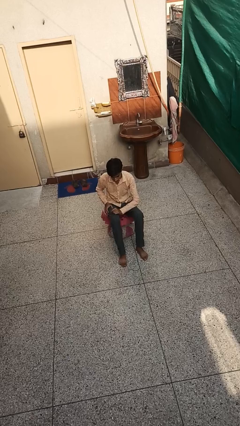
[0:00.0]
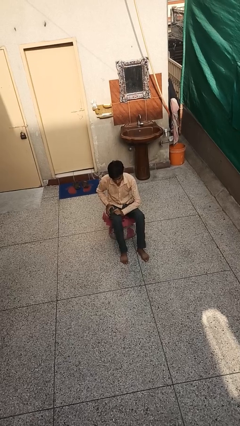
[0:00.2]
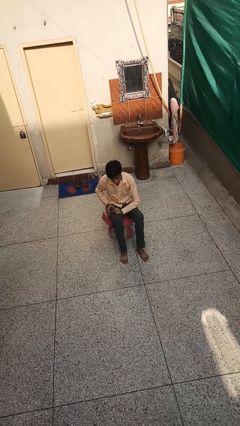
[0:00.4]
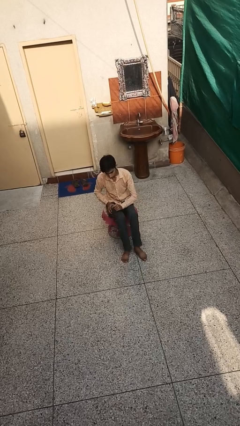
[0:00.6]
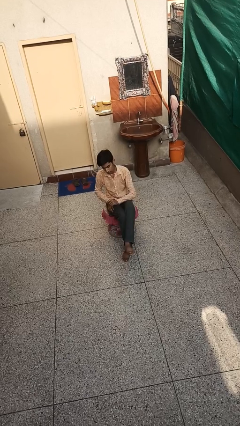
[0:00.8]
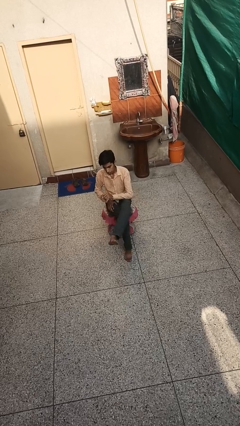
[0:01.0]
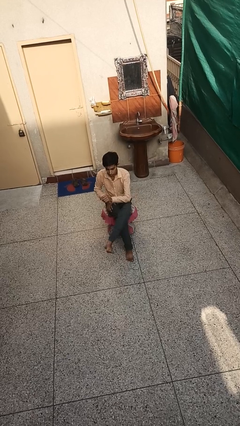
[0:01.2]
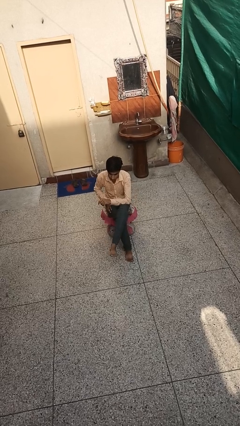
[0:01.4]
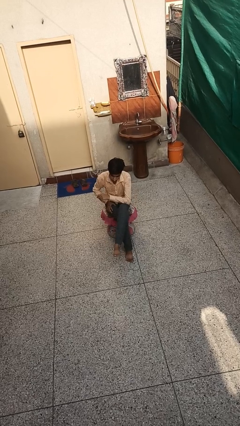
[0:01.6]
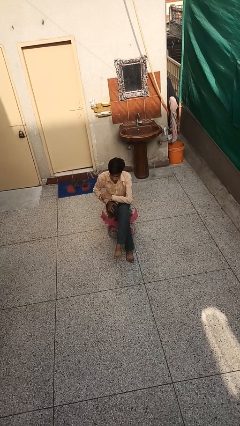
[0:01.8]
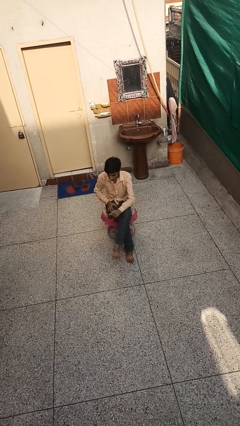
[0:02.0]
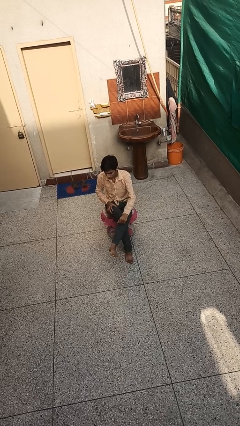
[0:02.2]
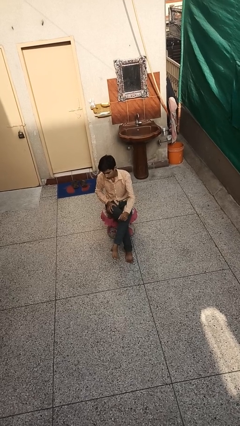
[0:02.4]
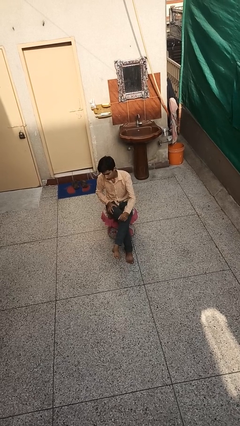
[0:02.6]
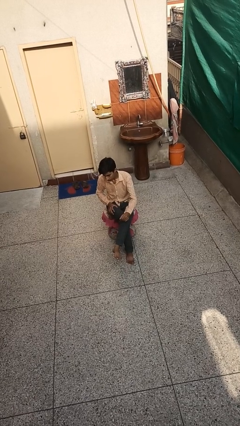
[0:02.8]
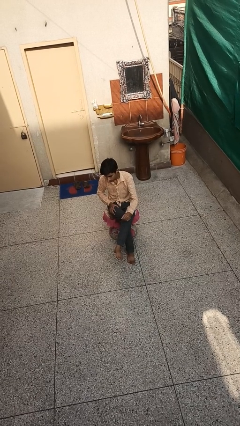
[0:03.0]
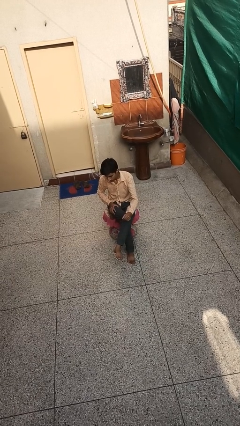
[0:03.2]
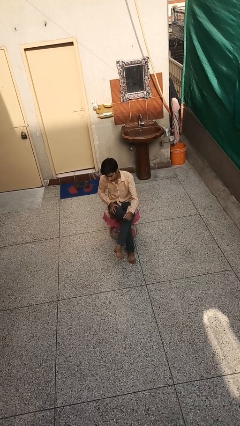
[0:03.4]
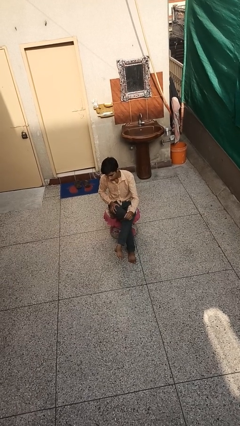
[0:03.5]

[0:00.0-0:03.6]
person crosses legs

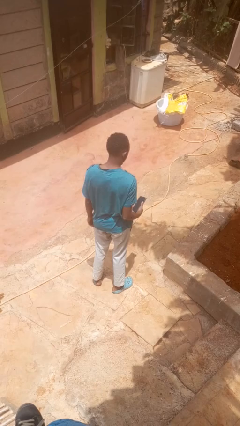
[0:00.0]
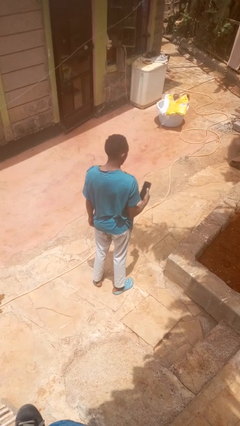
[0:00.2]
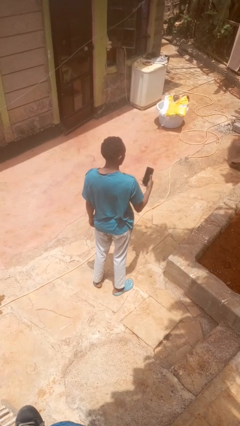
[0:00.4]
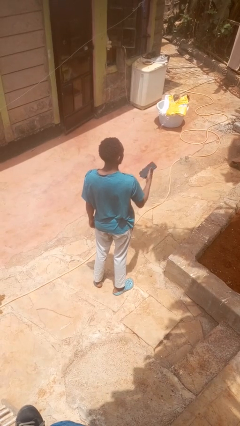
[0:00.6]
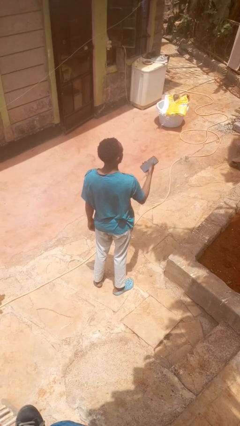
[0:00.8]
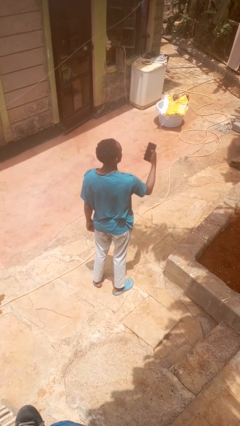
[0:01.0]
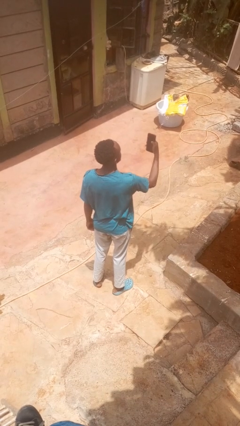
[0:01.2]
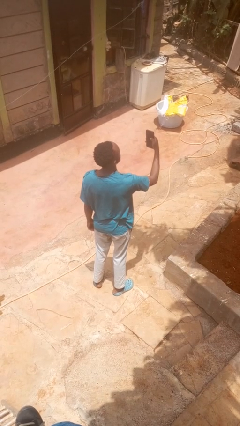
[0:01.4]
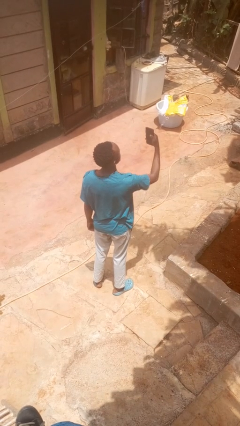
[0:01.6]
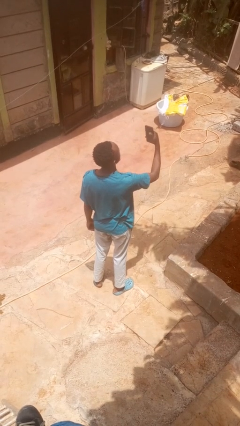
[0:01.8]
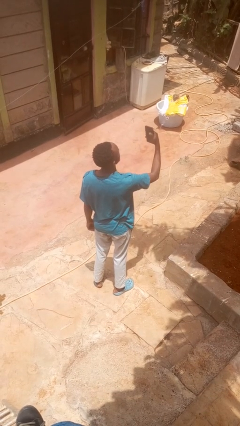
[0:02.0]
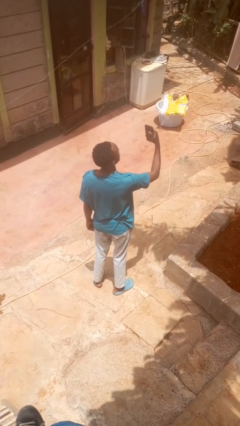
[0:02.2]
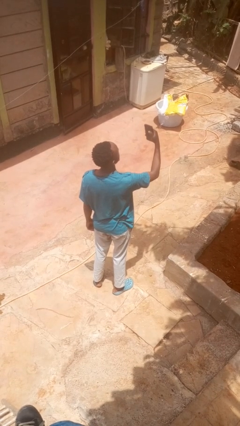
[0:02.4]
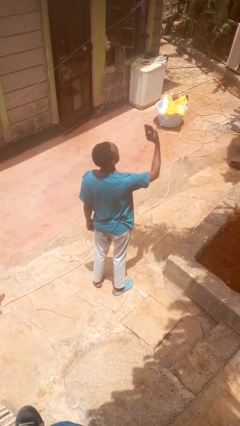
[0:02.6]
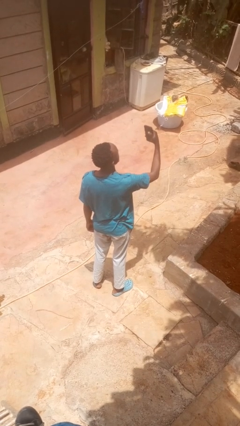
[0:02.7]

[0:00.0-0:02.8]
person takes selfie

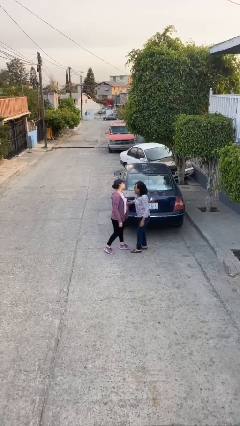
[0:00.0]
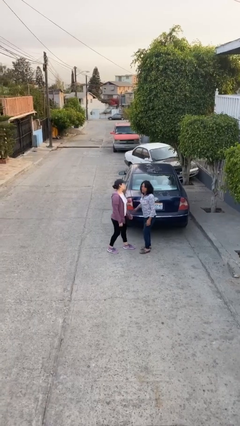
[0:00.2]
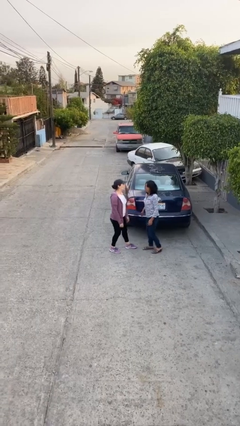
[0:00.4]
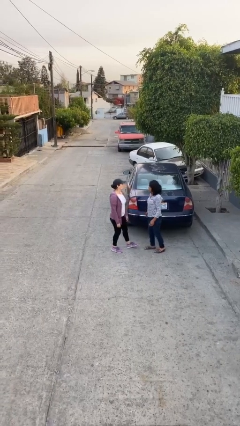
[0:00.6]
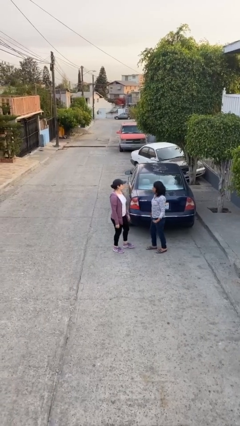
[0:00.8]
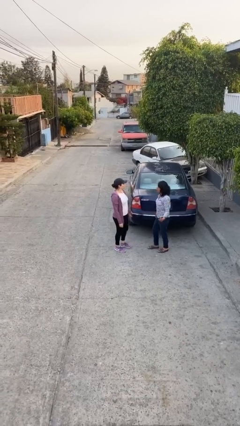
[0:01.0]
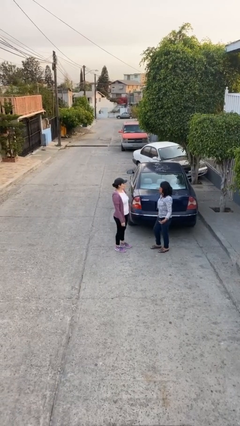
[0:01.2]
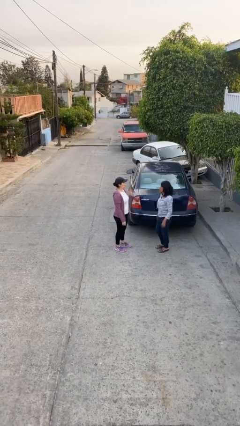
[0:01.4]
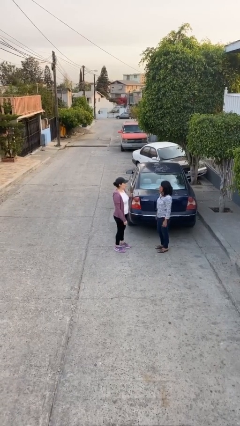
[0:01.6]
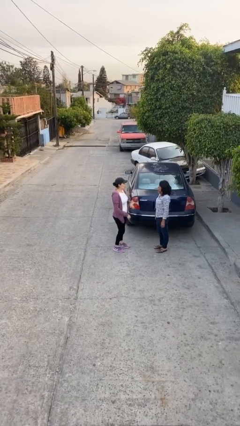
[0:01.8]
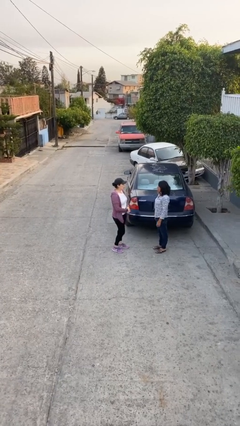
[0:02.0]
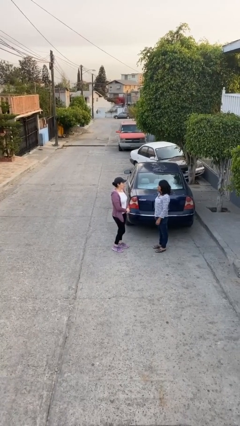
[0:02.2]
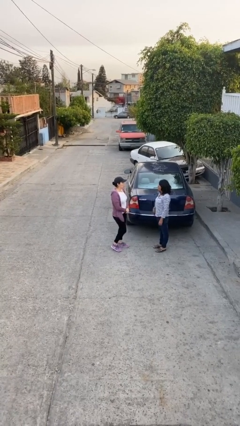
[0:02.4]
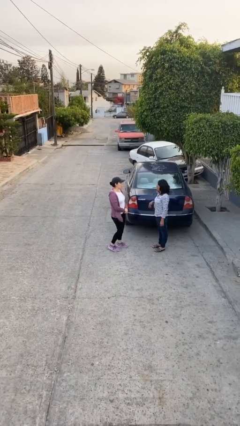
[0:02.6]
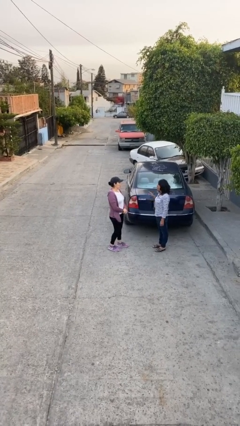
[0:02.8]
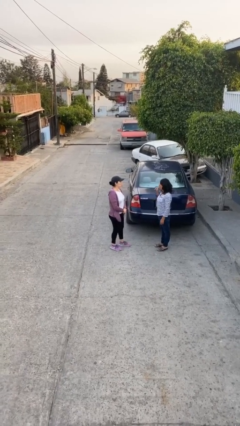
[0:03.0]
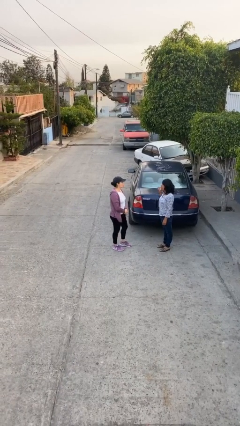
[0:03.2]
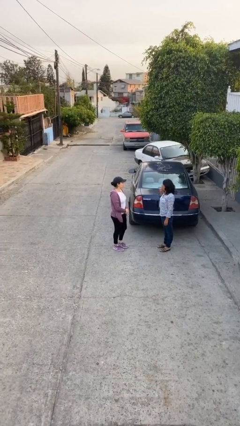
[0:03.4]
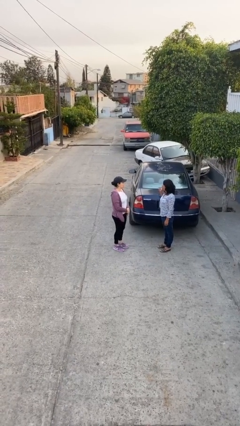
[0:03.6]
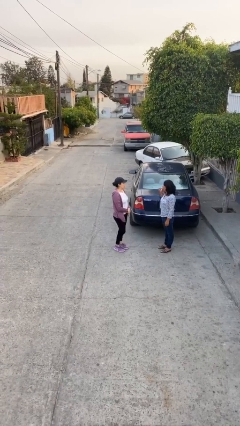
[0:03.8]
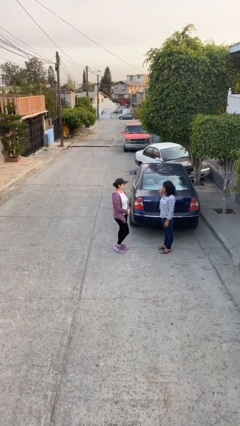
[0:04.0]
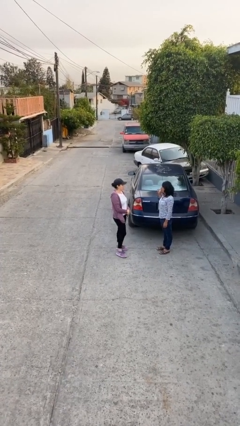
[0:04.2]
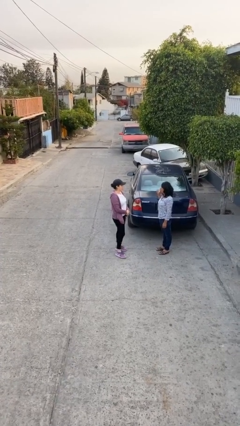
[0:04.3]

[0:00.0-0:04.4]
person talks to person

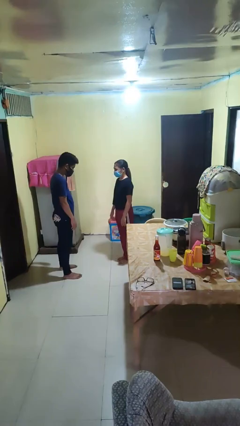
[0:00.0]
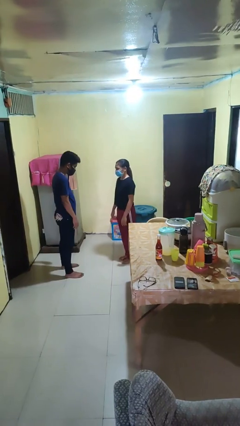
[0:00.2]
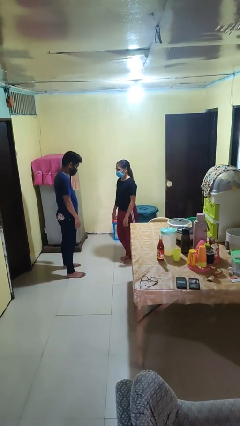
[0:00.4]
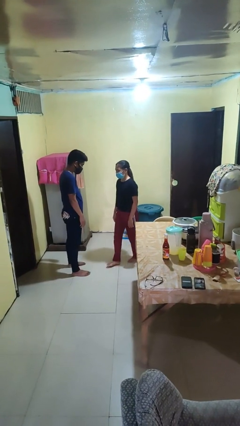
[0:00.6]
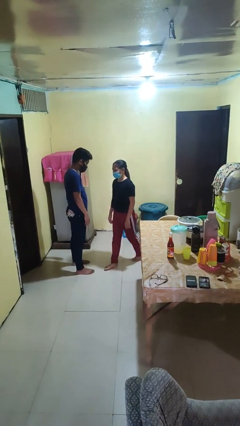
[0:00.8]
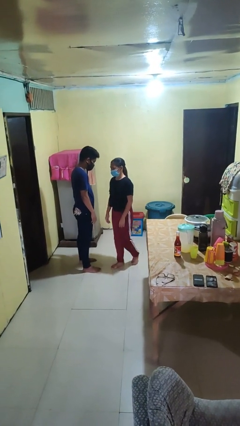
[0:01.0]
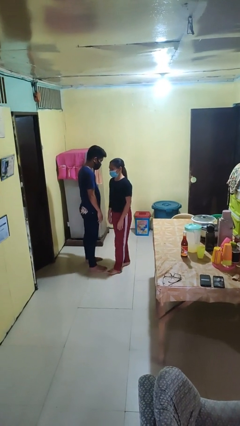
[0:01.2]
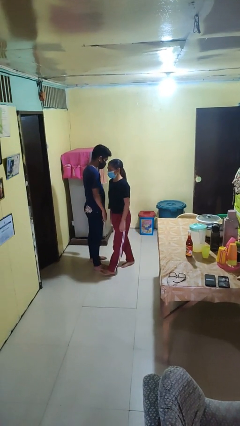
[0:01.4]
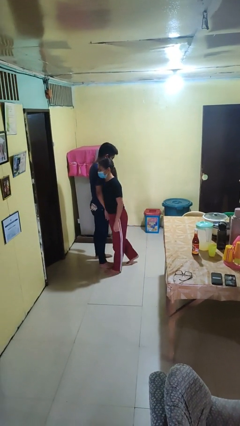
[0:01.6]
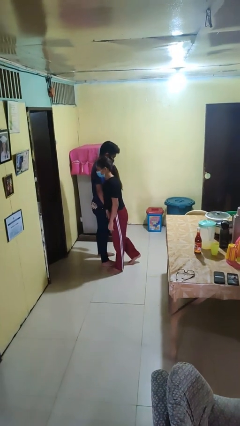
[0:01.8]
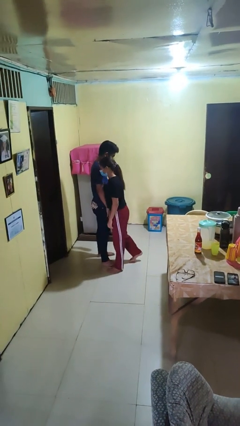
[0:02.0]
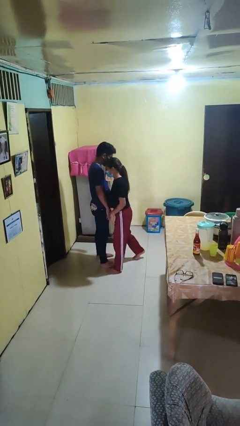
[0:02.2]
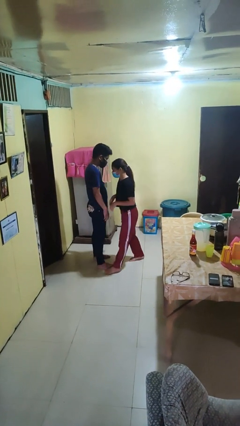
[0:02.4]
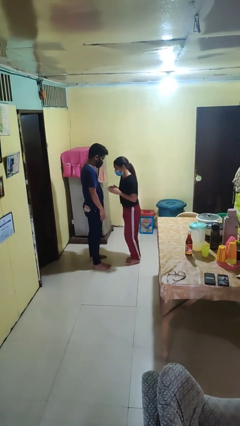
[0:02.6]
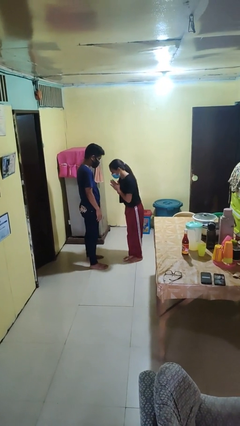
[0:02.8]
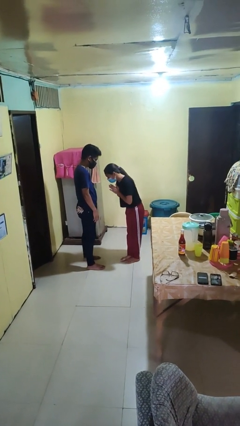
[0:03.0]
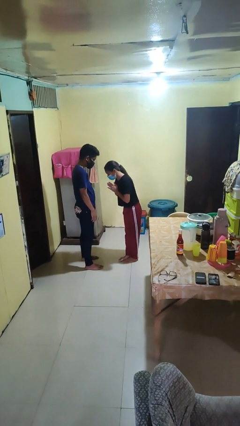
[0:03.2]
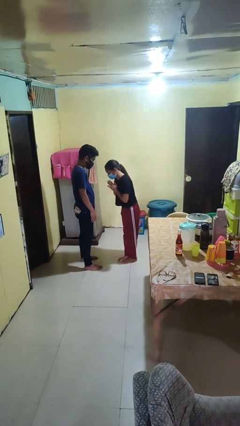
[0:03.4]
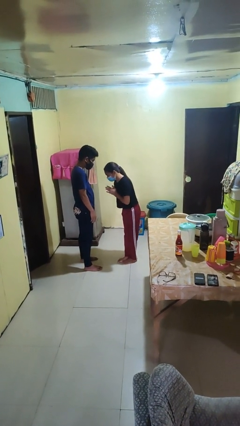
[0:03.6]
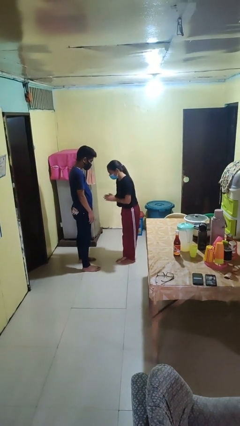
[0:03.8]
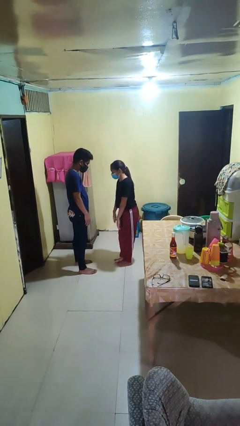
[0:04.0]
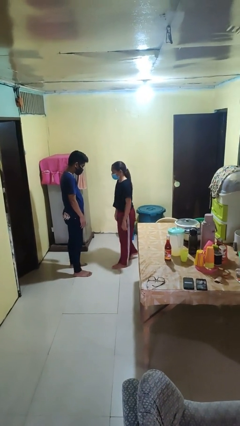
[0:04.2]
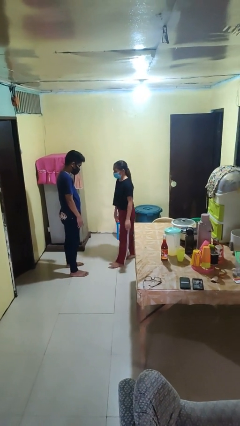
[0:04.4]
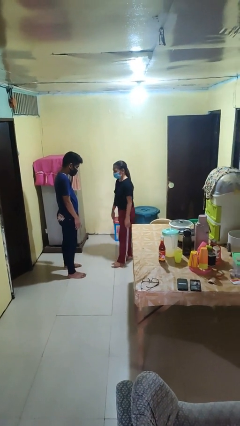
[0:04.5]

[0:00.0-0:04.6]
person bumps into person

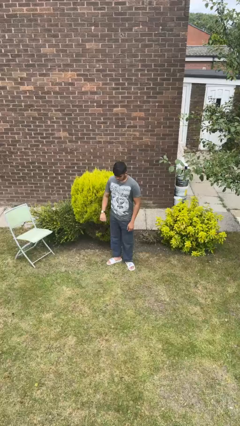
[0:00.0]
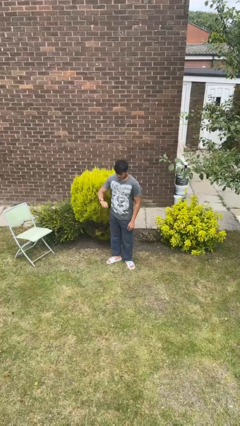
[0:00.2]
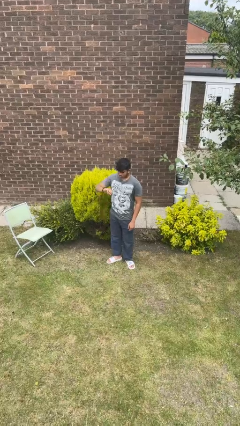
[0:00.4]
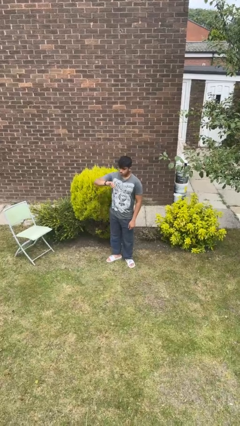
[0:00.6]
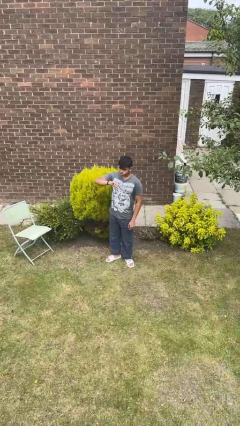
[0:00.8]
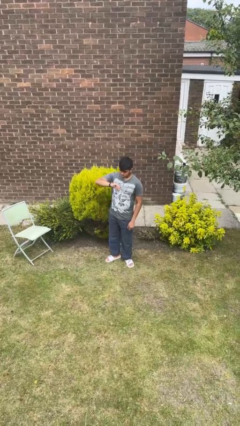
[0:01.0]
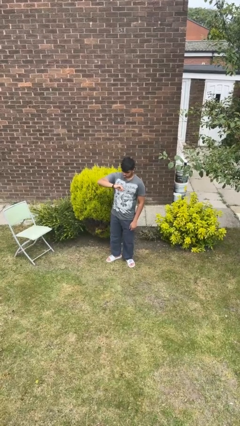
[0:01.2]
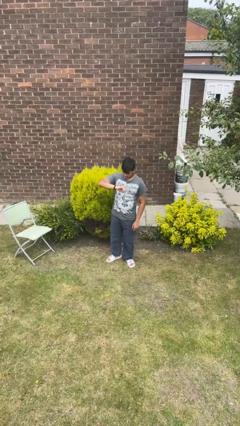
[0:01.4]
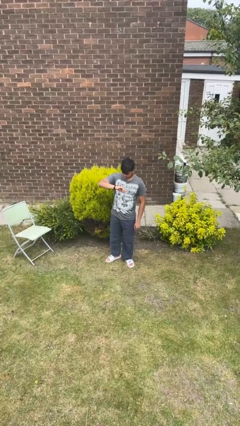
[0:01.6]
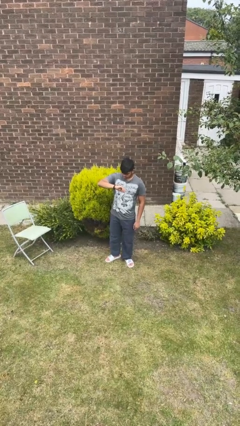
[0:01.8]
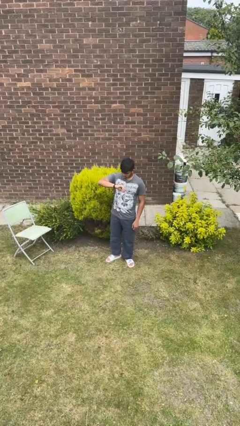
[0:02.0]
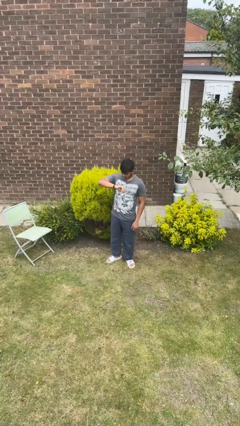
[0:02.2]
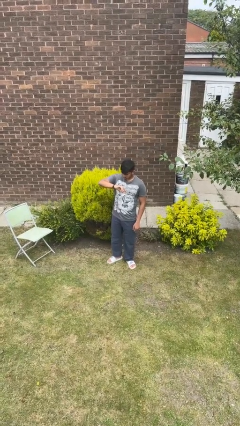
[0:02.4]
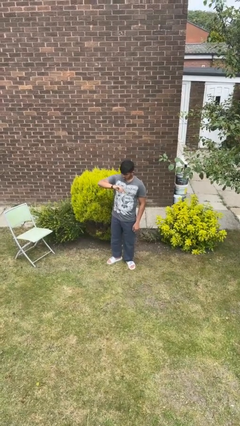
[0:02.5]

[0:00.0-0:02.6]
person looks at wristwatch
